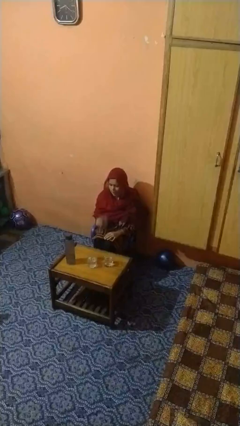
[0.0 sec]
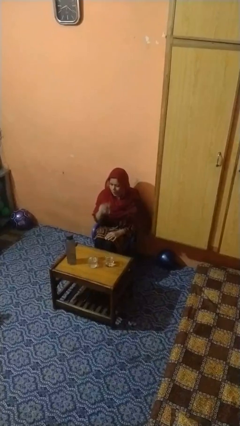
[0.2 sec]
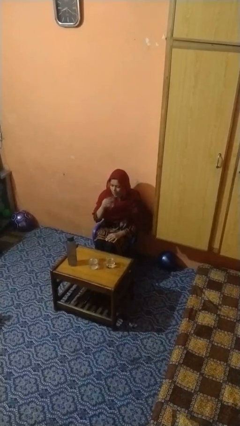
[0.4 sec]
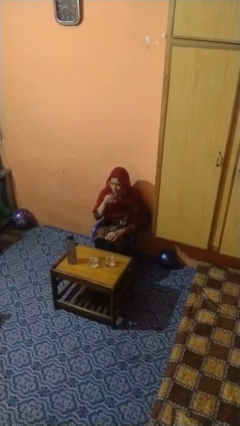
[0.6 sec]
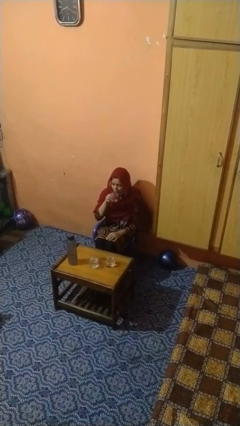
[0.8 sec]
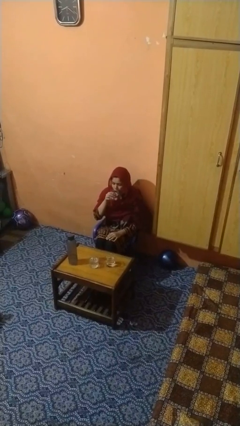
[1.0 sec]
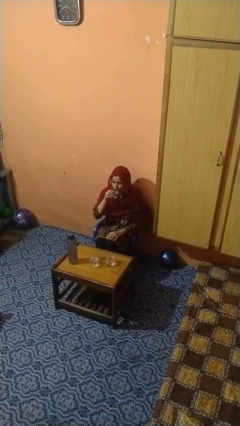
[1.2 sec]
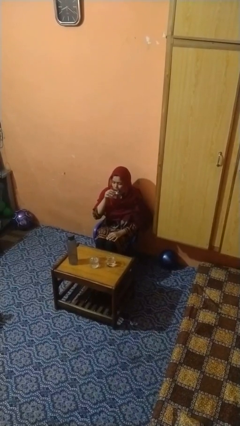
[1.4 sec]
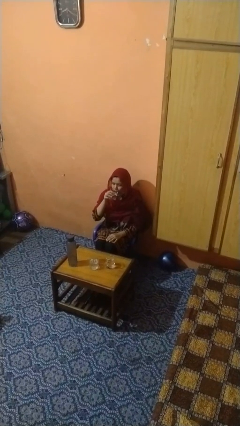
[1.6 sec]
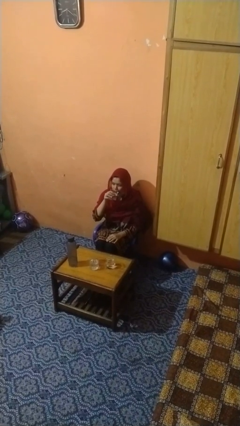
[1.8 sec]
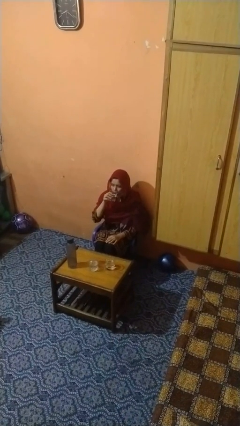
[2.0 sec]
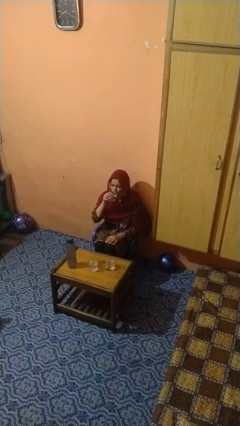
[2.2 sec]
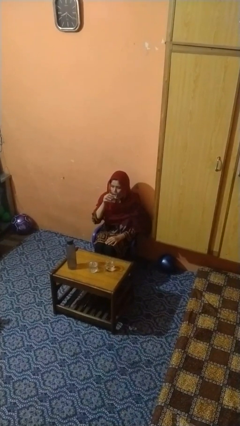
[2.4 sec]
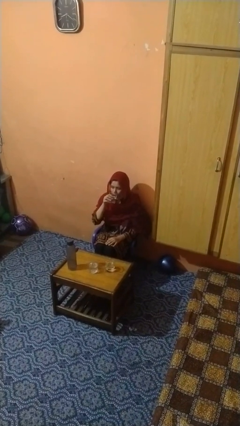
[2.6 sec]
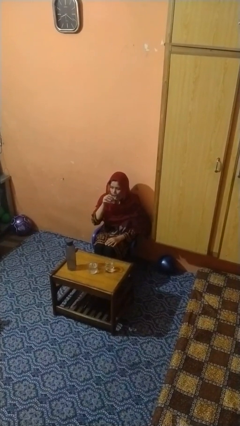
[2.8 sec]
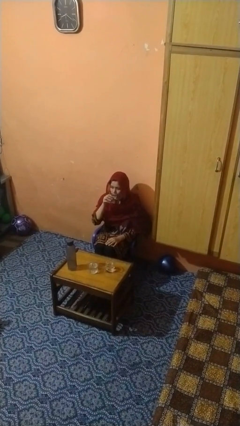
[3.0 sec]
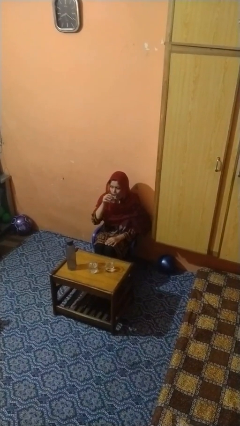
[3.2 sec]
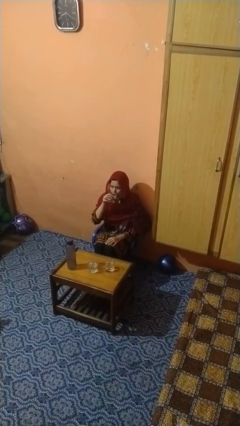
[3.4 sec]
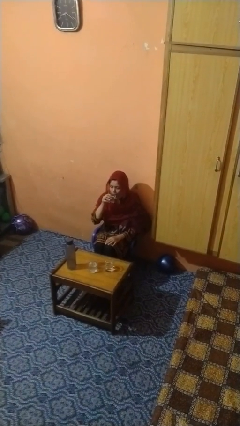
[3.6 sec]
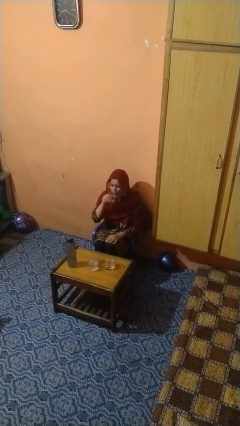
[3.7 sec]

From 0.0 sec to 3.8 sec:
person drinks from shotglass

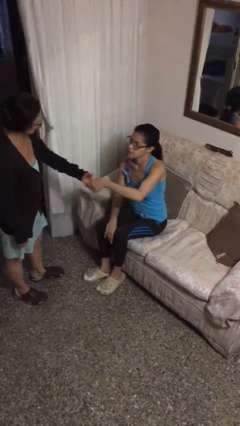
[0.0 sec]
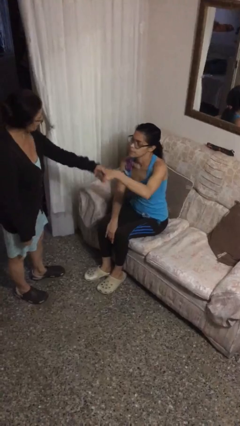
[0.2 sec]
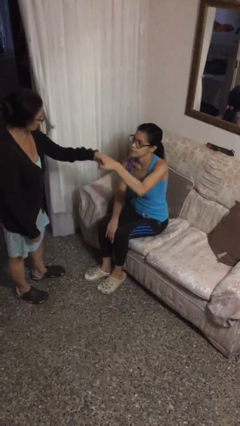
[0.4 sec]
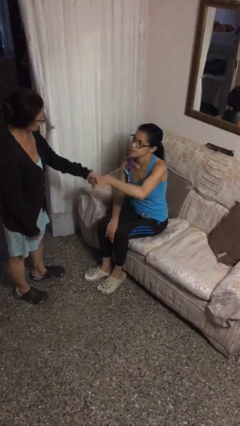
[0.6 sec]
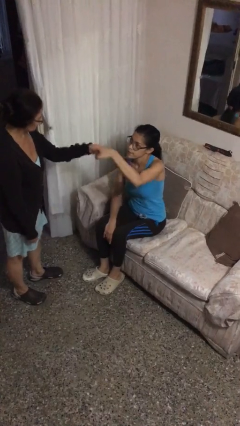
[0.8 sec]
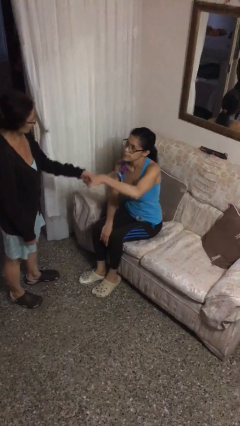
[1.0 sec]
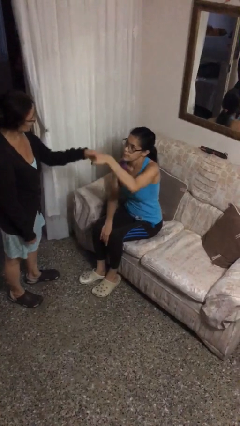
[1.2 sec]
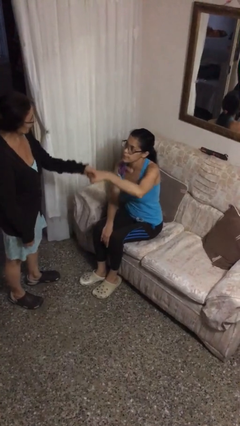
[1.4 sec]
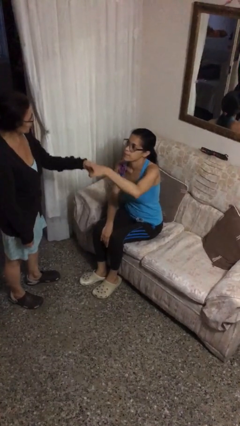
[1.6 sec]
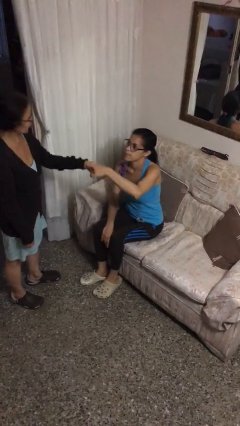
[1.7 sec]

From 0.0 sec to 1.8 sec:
person shakes hand

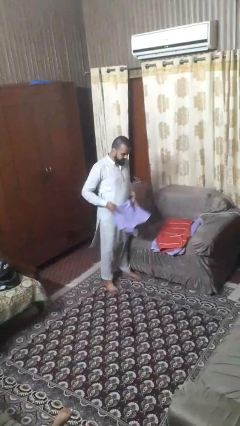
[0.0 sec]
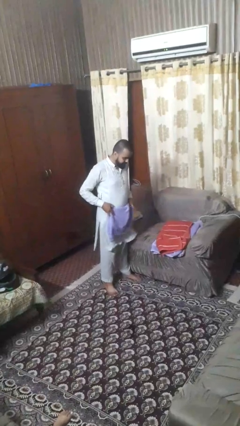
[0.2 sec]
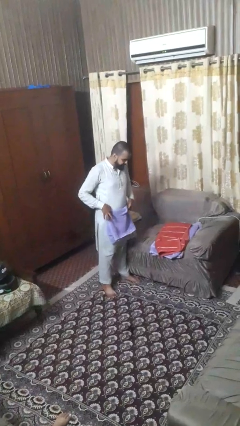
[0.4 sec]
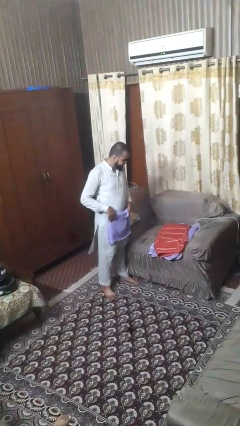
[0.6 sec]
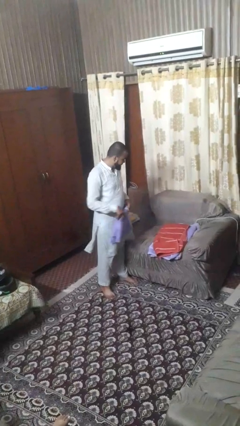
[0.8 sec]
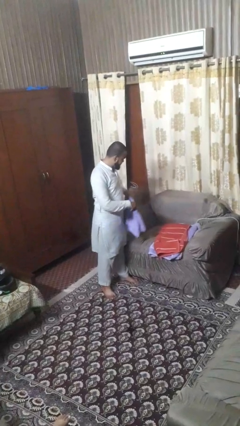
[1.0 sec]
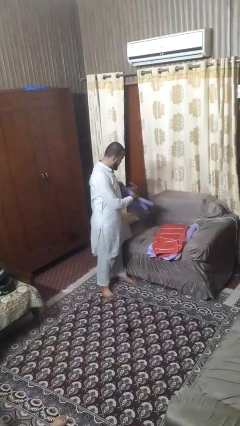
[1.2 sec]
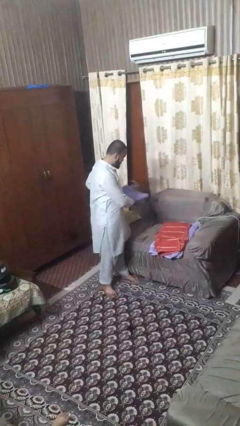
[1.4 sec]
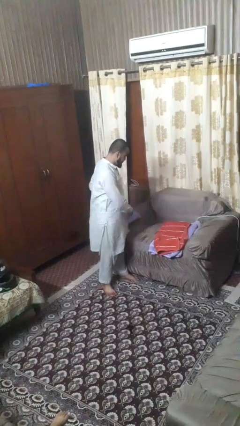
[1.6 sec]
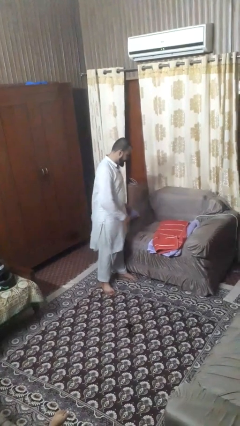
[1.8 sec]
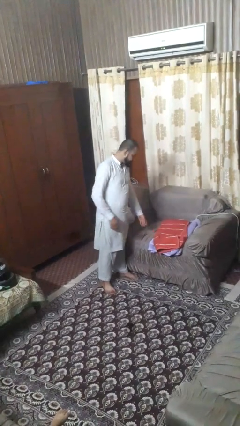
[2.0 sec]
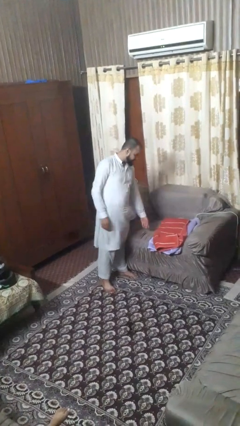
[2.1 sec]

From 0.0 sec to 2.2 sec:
person folds towel

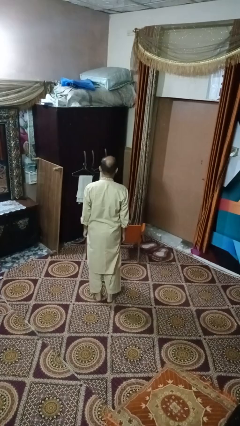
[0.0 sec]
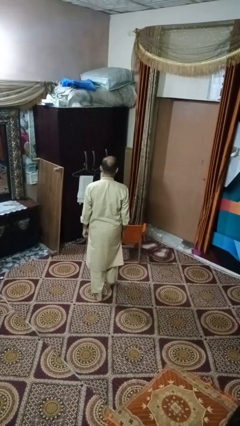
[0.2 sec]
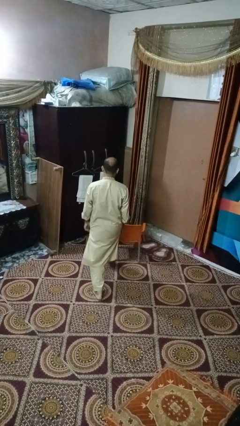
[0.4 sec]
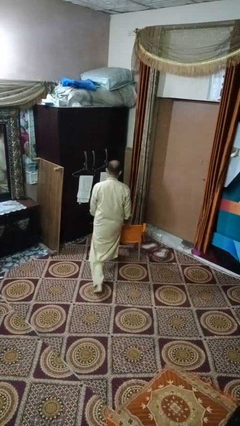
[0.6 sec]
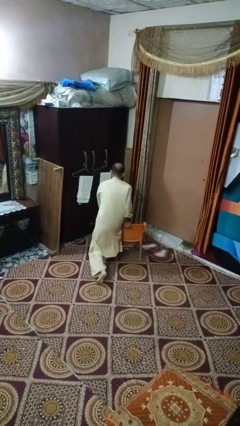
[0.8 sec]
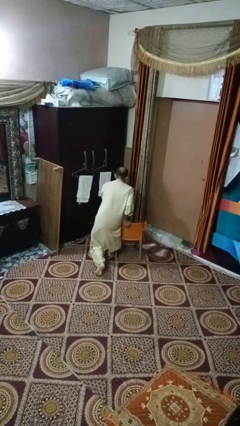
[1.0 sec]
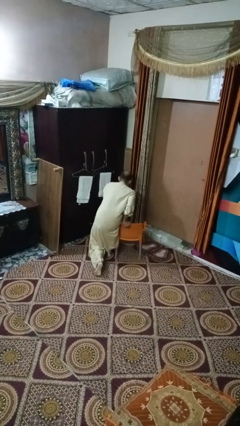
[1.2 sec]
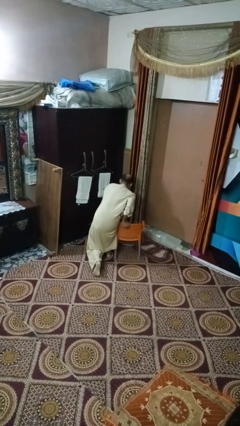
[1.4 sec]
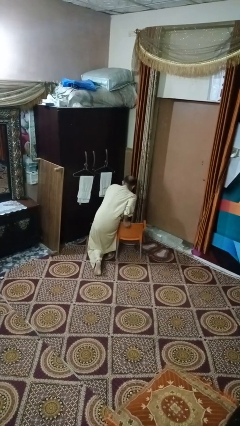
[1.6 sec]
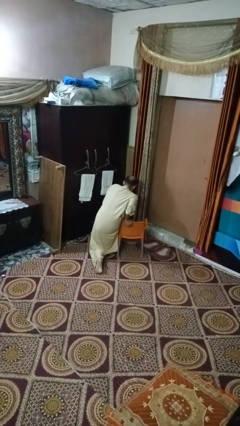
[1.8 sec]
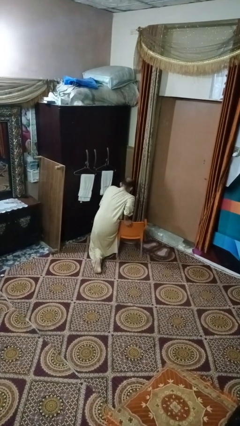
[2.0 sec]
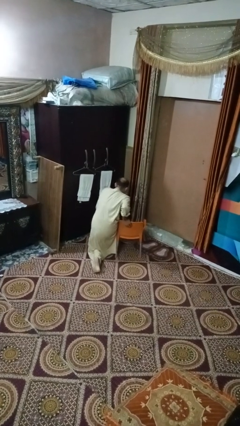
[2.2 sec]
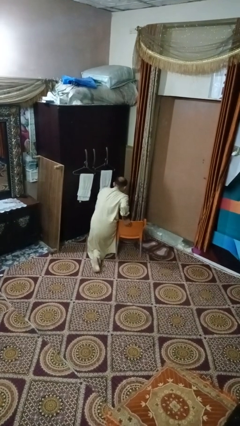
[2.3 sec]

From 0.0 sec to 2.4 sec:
person trips on object on floor

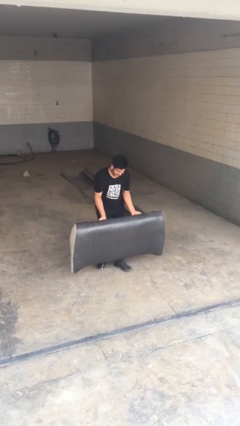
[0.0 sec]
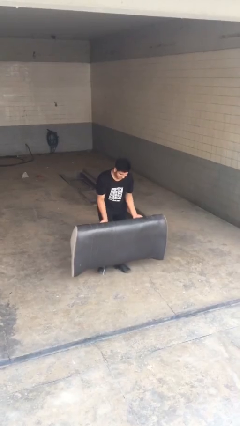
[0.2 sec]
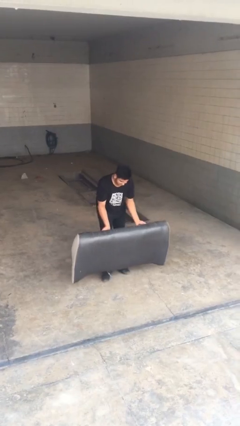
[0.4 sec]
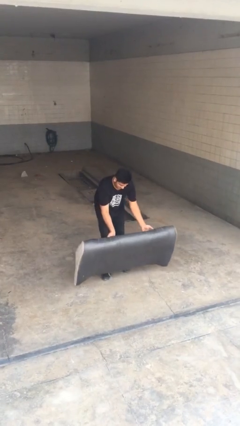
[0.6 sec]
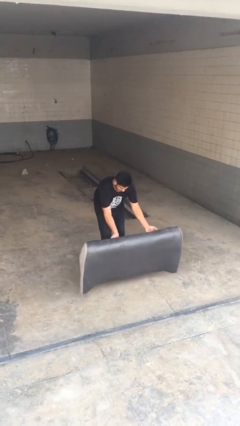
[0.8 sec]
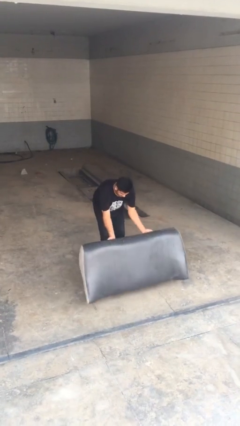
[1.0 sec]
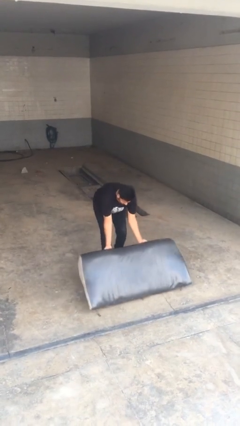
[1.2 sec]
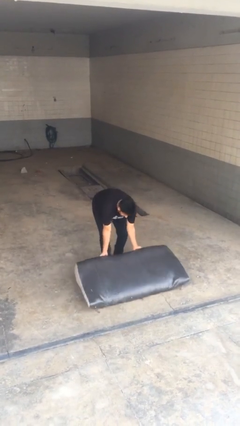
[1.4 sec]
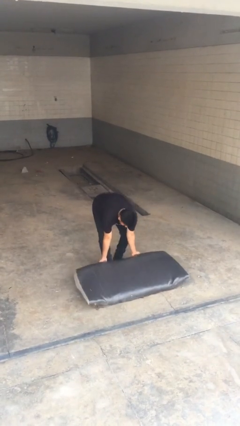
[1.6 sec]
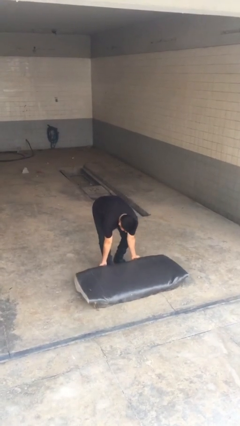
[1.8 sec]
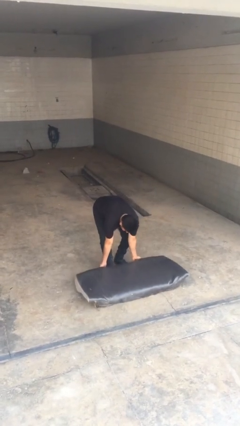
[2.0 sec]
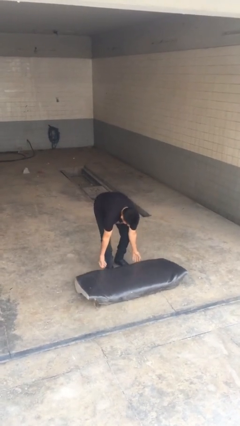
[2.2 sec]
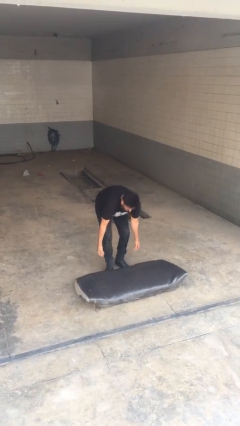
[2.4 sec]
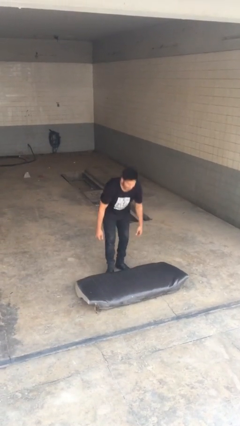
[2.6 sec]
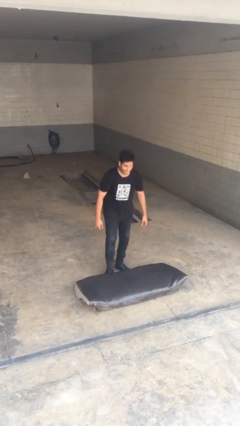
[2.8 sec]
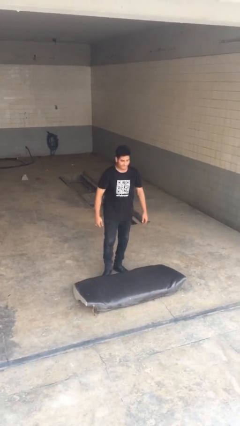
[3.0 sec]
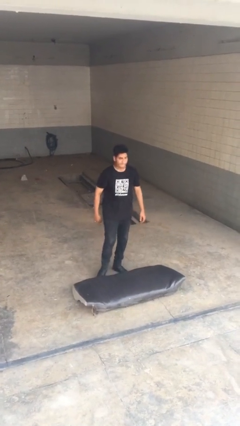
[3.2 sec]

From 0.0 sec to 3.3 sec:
person puts down object on floor

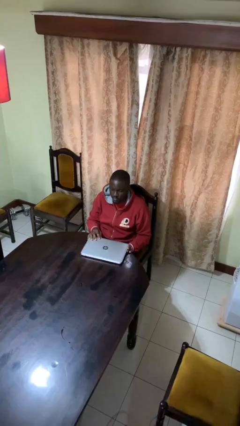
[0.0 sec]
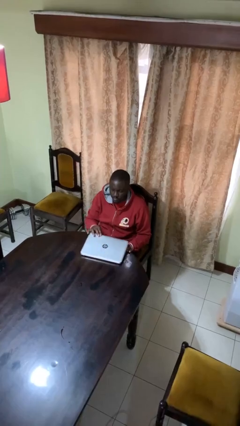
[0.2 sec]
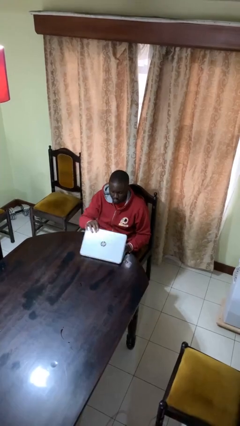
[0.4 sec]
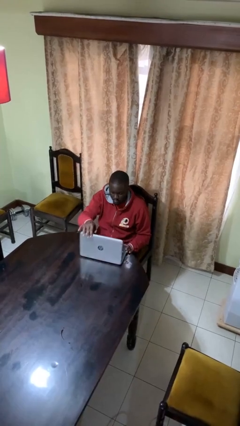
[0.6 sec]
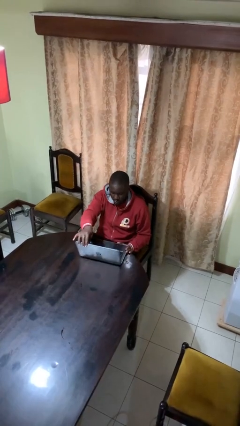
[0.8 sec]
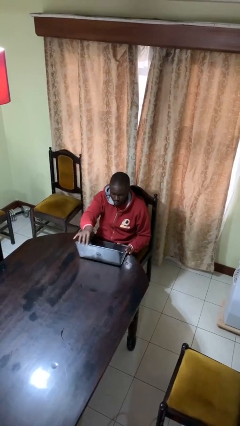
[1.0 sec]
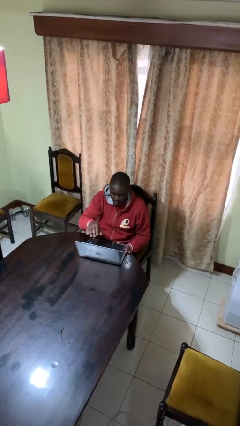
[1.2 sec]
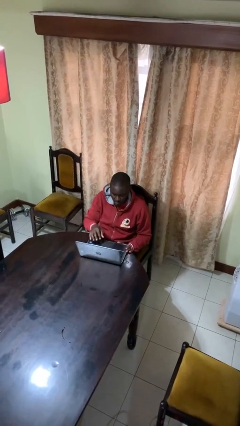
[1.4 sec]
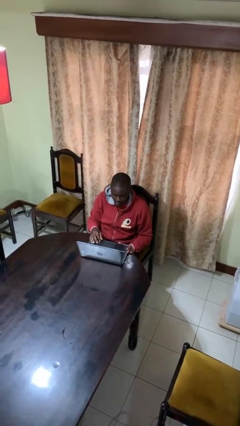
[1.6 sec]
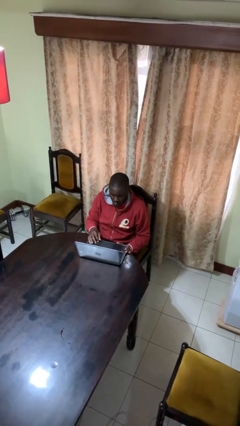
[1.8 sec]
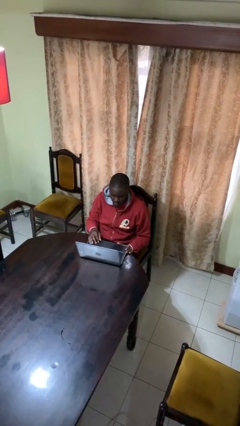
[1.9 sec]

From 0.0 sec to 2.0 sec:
person opens laptop

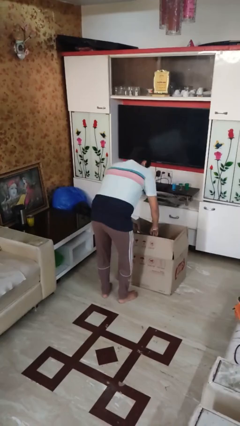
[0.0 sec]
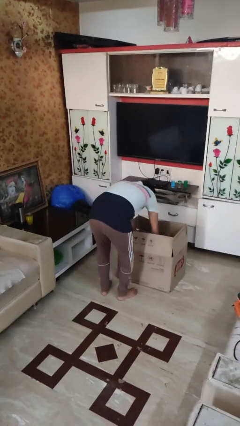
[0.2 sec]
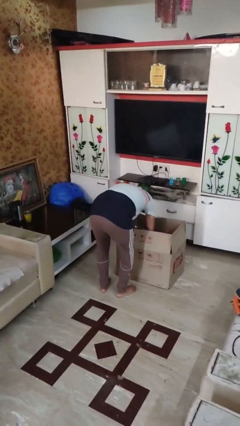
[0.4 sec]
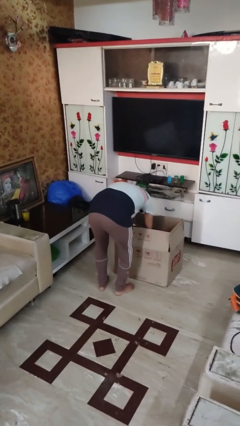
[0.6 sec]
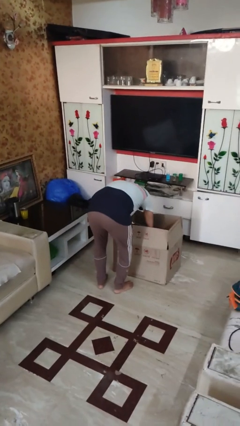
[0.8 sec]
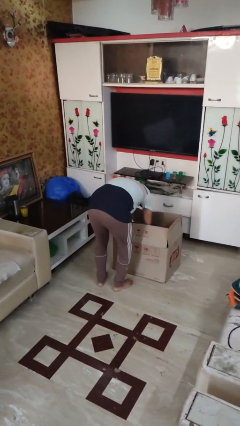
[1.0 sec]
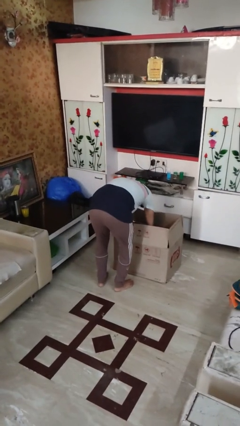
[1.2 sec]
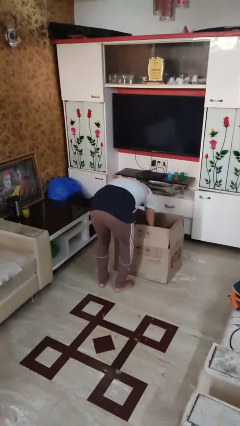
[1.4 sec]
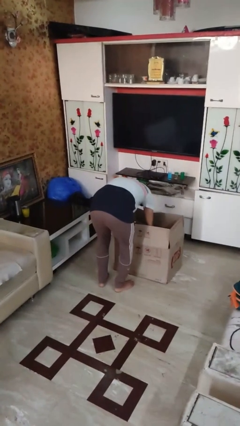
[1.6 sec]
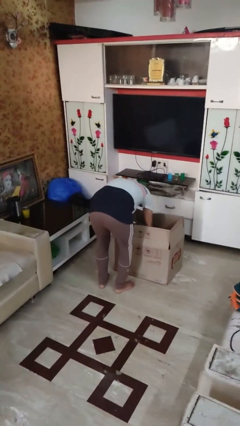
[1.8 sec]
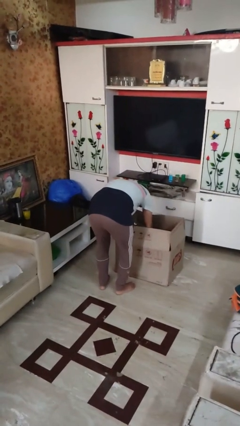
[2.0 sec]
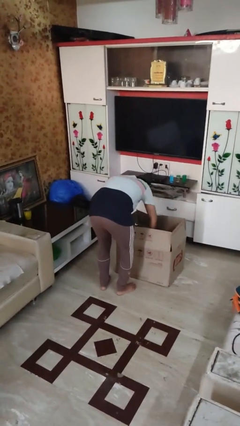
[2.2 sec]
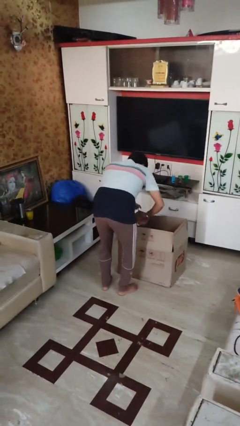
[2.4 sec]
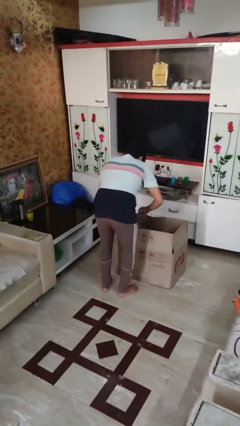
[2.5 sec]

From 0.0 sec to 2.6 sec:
person searches in box
